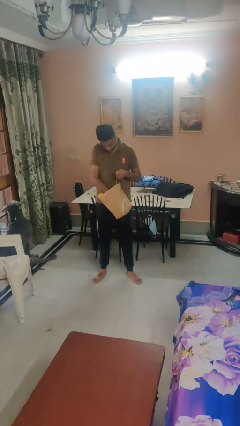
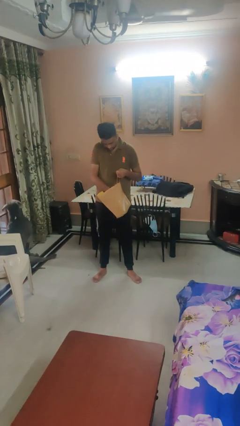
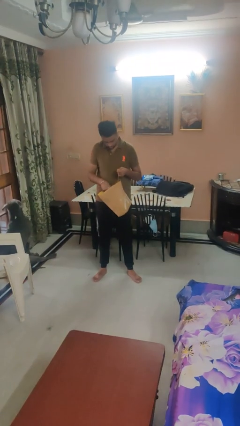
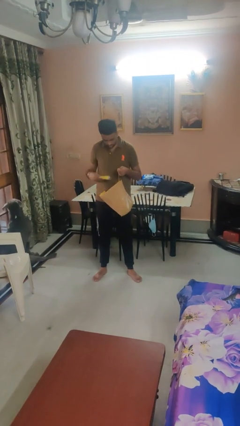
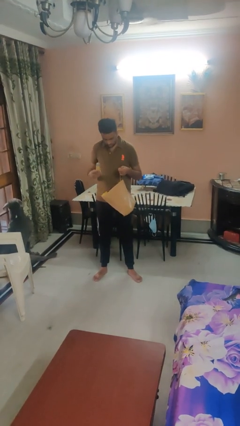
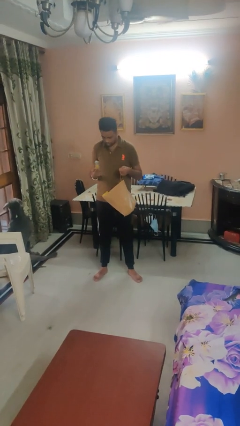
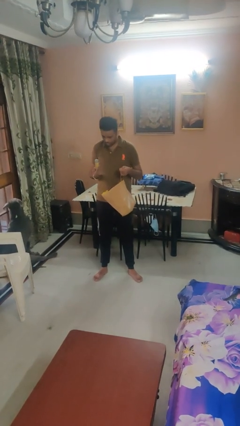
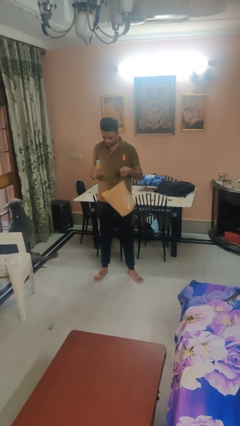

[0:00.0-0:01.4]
person takes object from bag

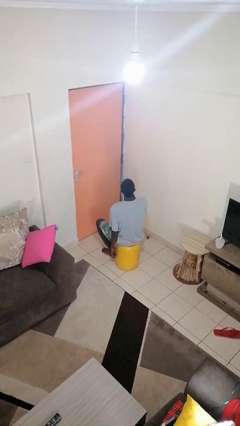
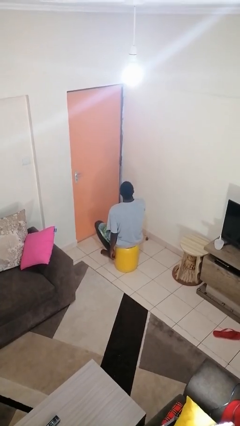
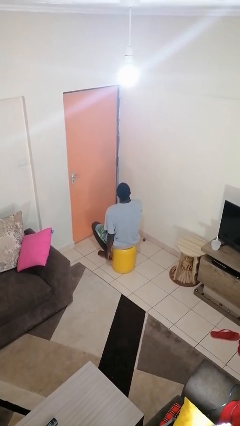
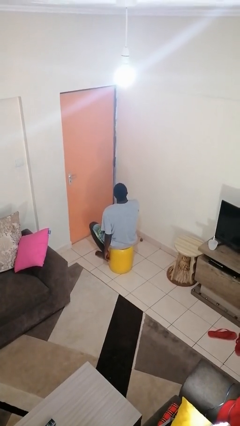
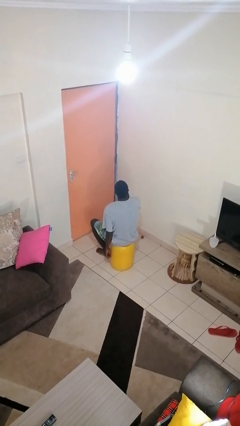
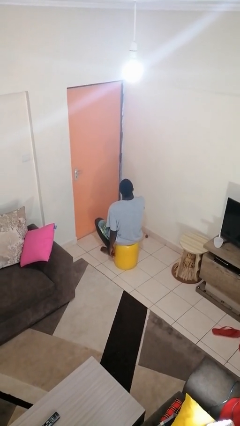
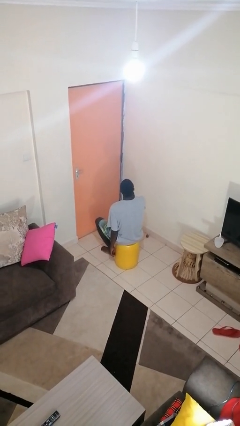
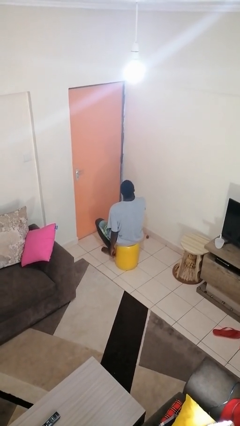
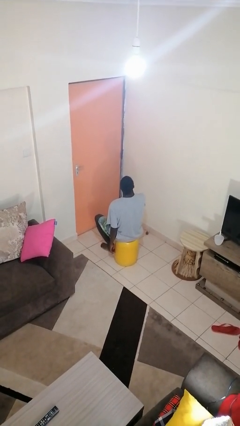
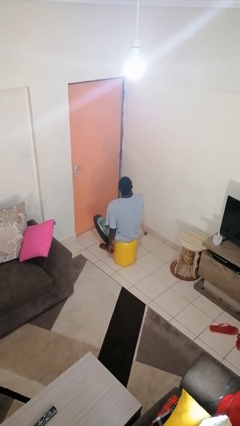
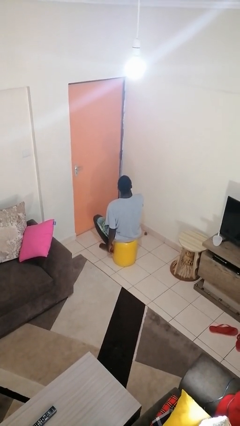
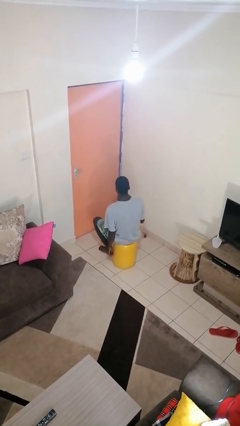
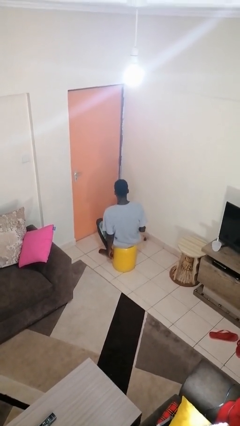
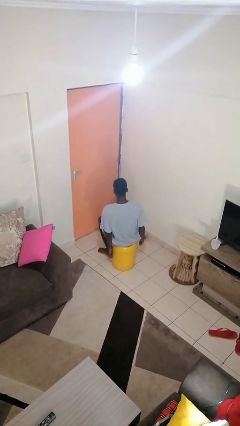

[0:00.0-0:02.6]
person strokes chin

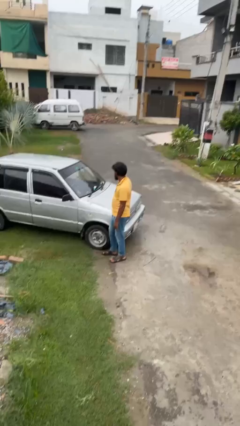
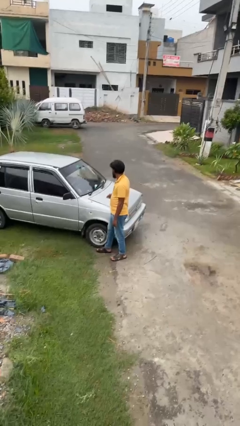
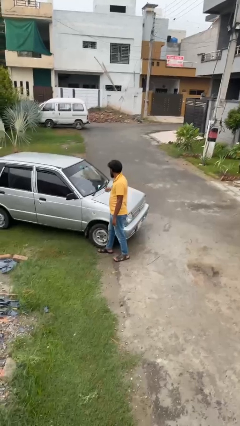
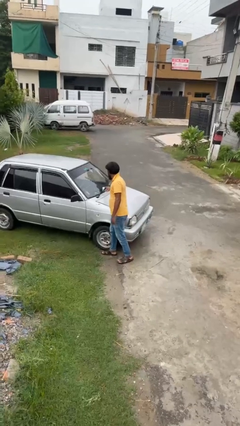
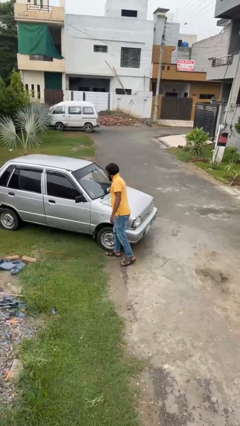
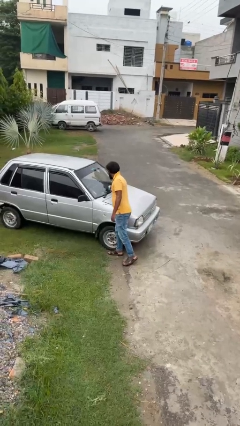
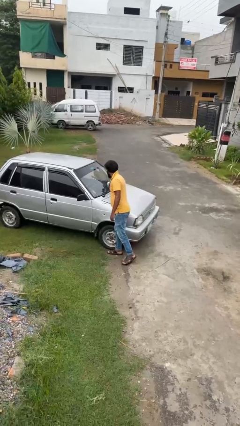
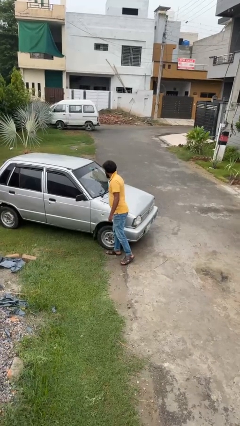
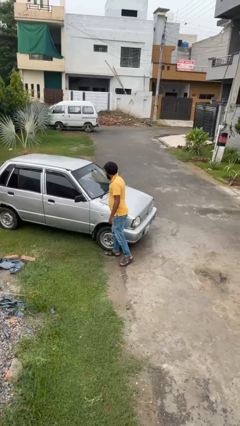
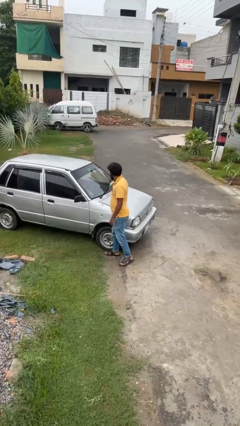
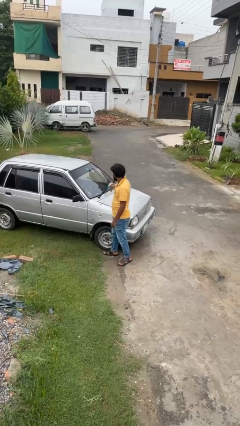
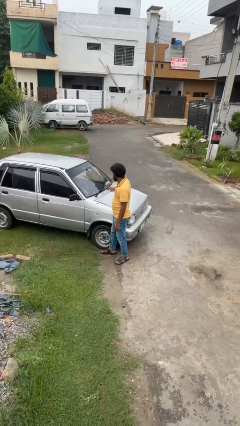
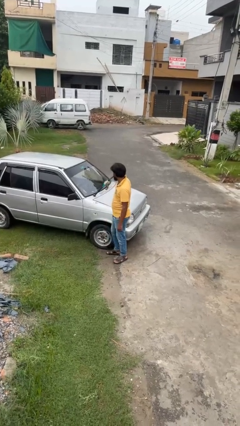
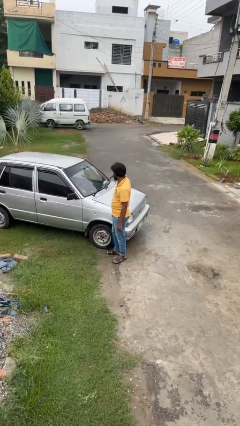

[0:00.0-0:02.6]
person flips up car wipers

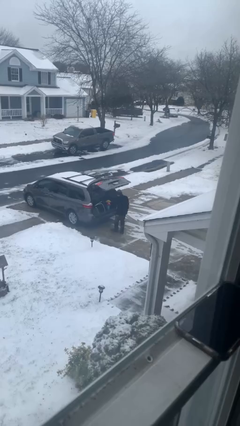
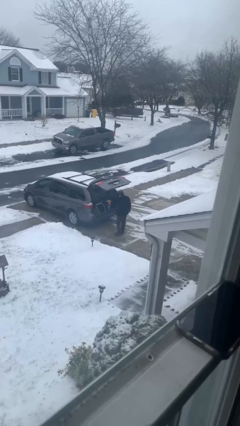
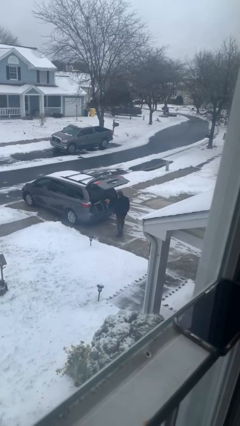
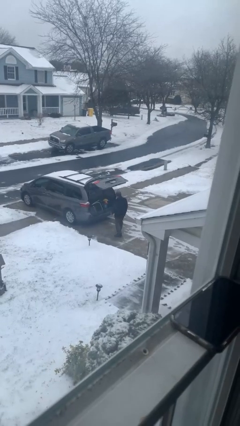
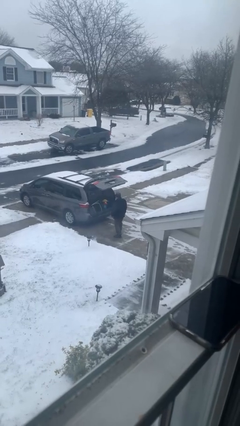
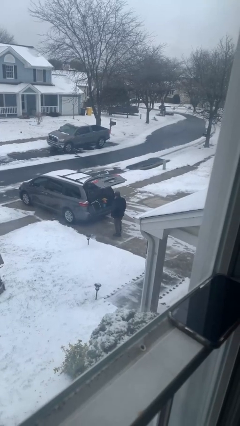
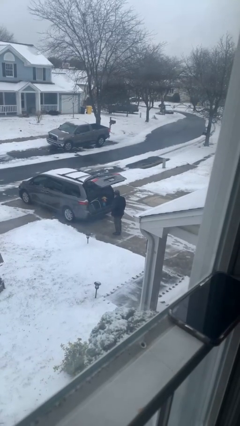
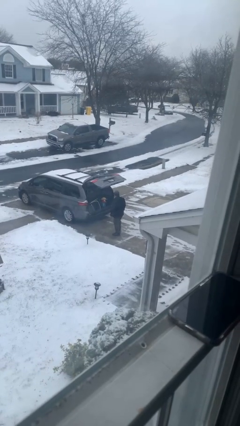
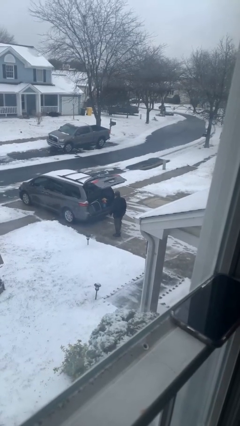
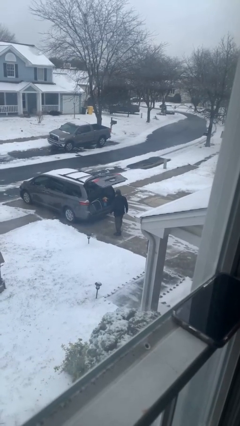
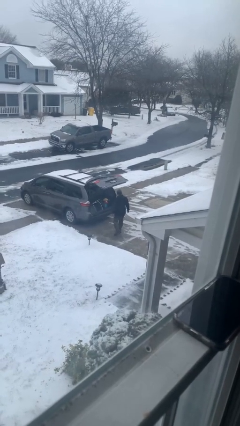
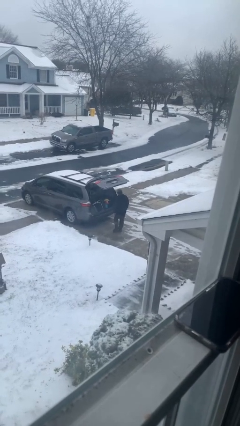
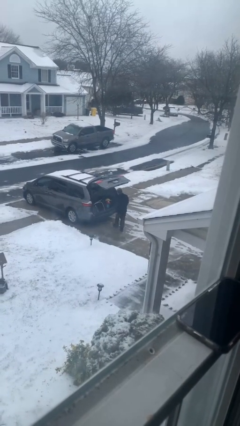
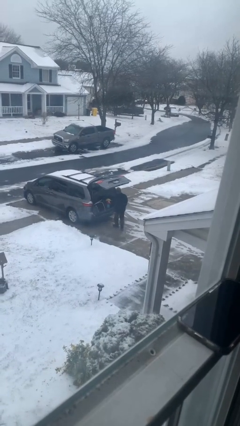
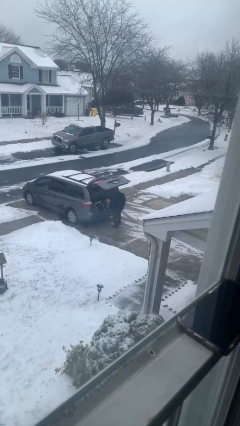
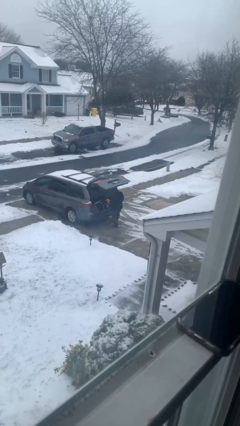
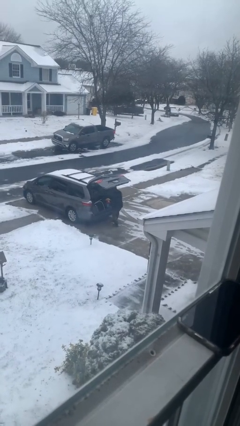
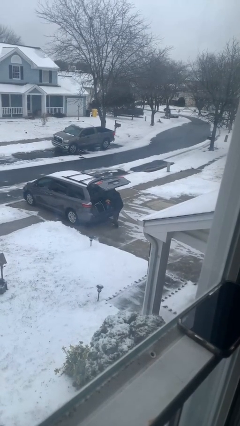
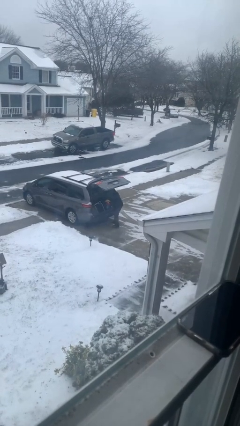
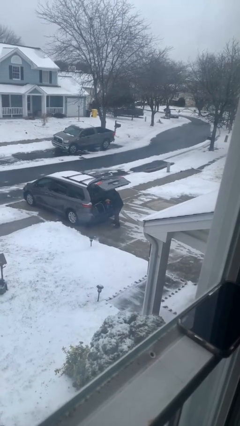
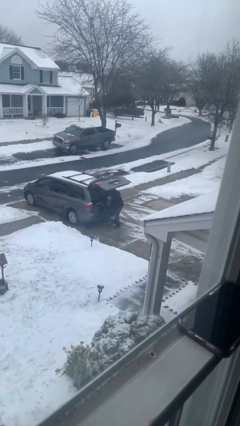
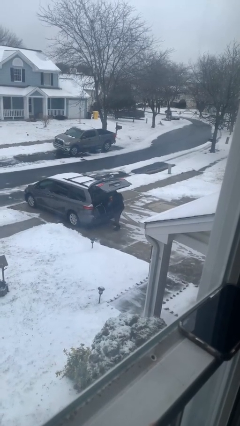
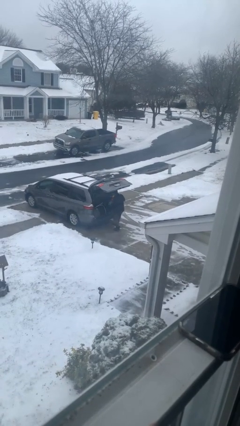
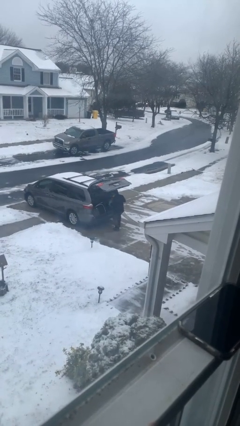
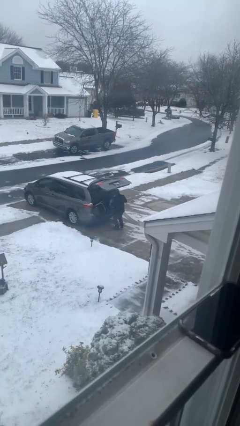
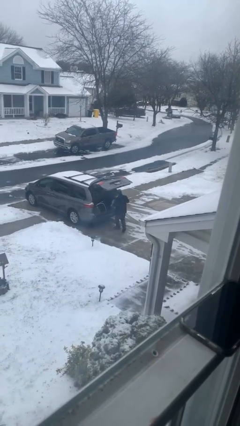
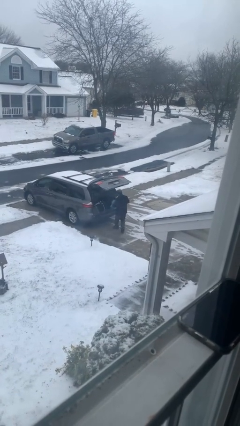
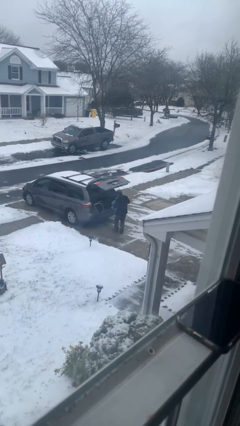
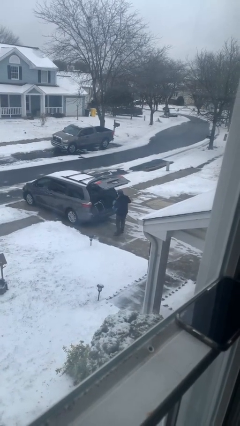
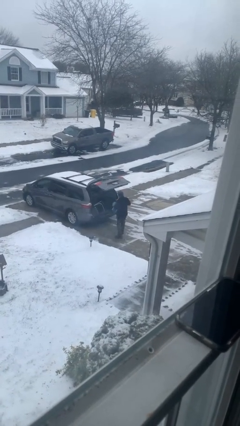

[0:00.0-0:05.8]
person unloads car

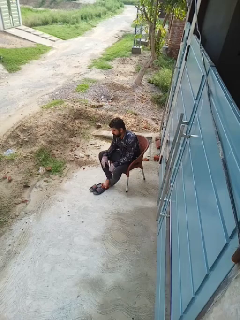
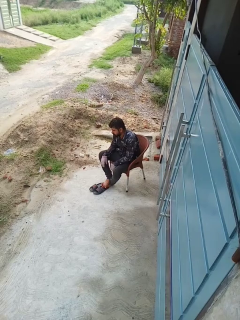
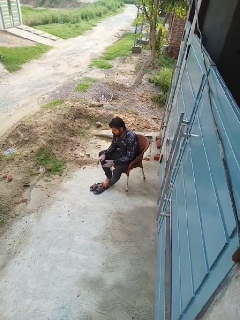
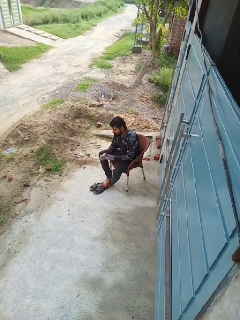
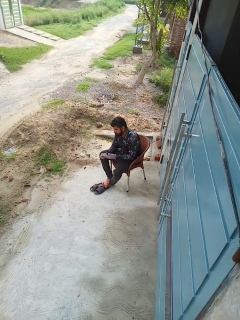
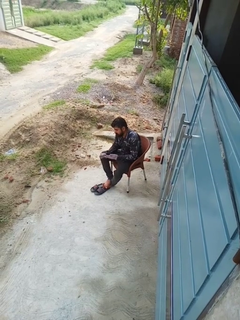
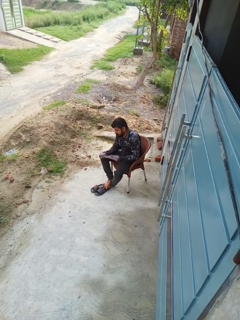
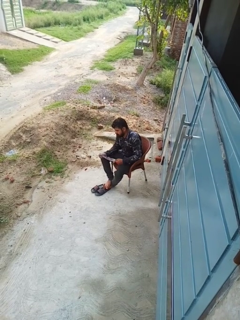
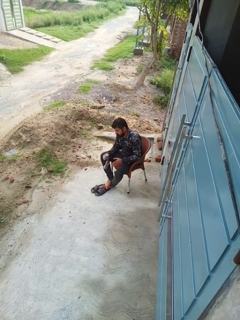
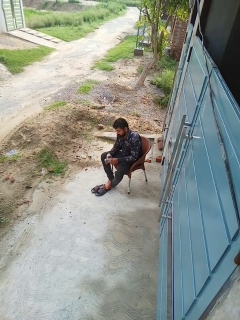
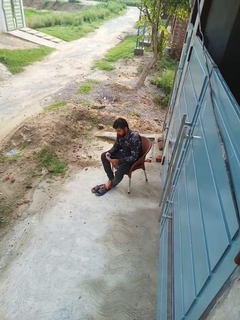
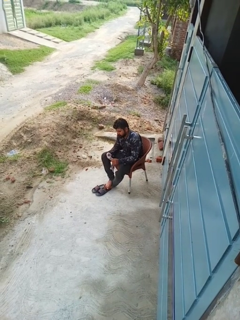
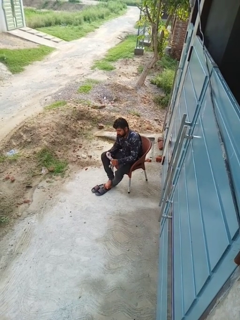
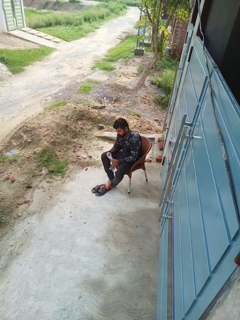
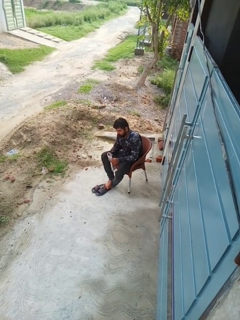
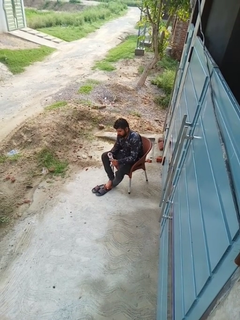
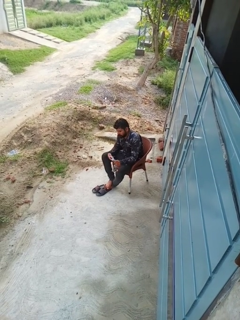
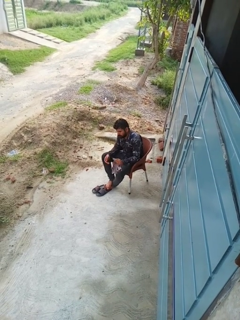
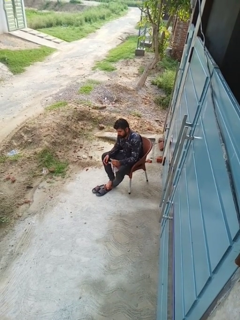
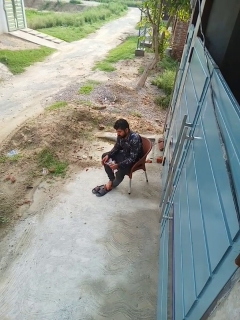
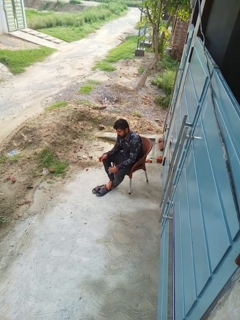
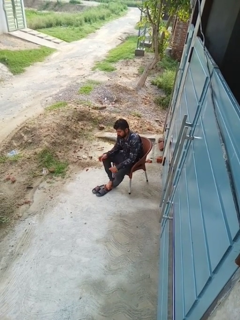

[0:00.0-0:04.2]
person takes off gloves

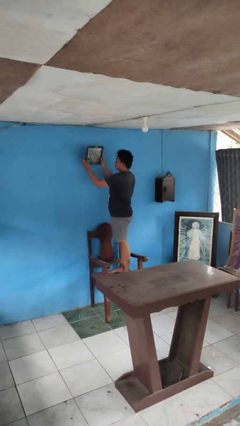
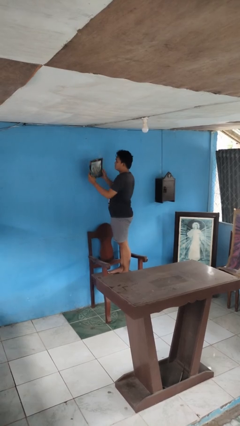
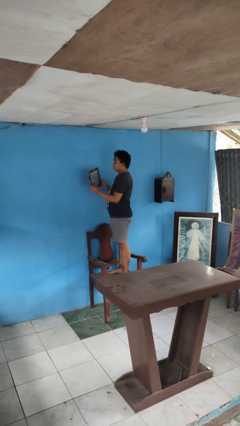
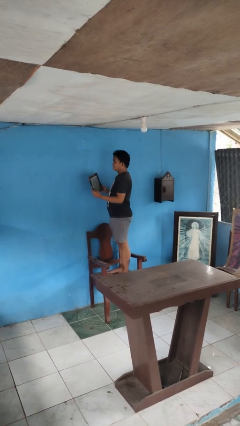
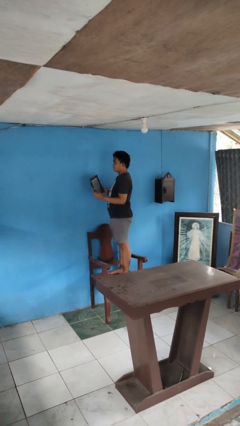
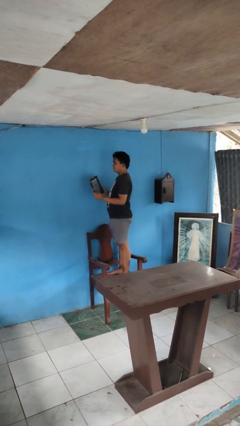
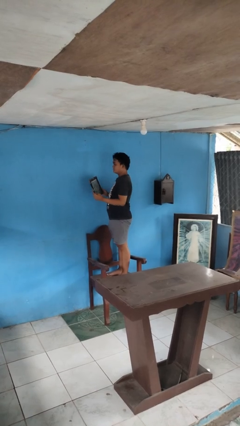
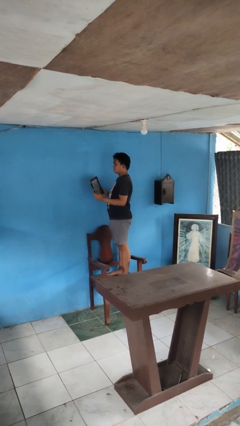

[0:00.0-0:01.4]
person takes down picture frame

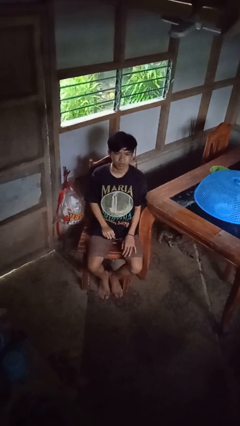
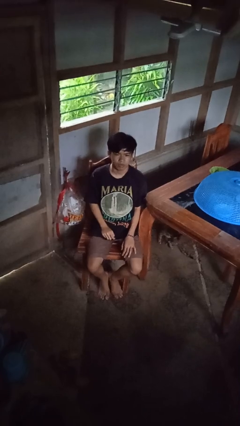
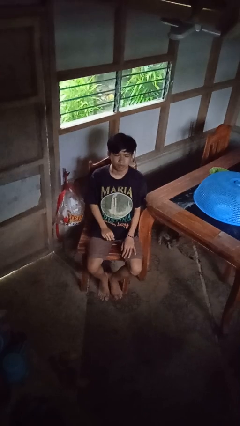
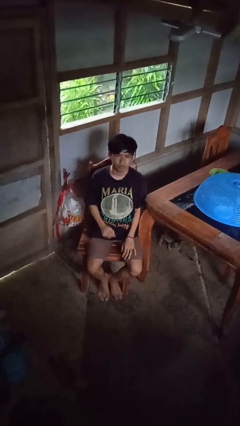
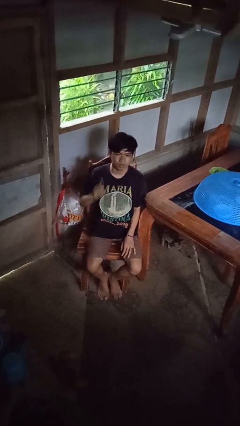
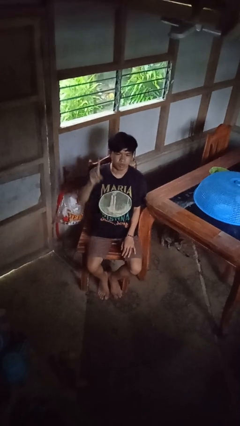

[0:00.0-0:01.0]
person gestures number one
